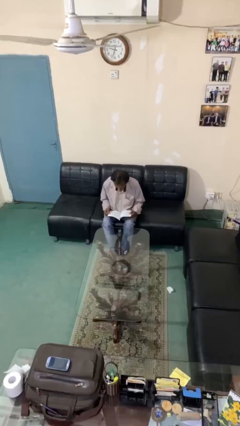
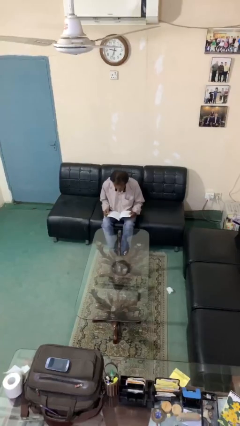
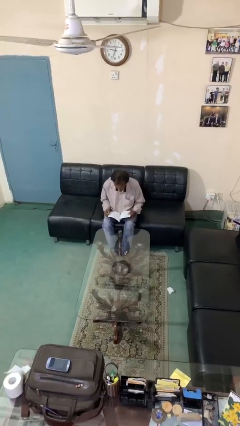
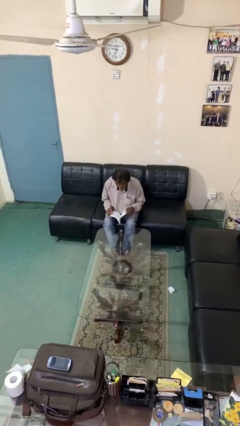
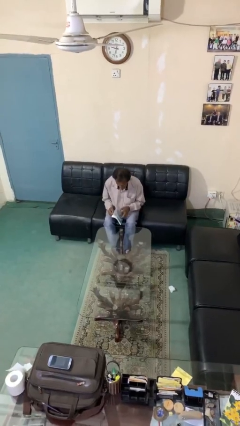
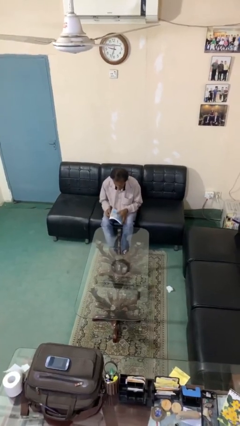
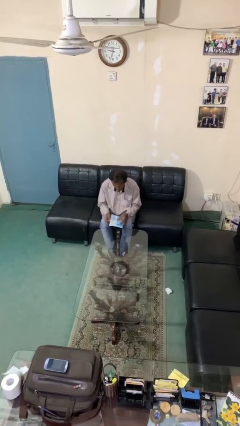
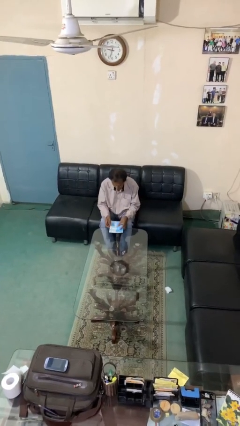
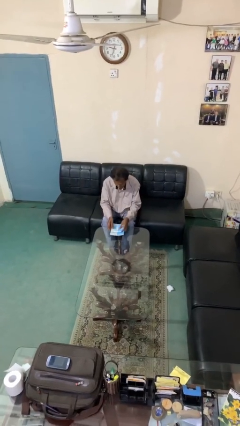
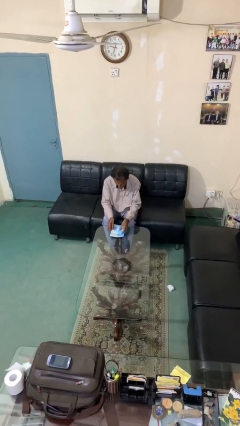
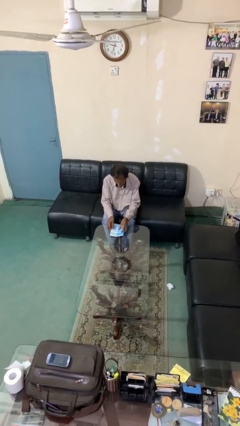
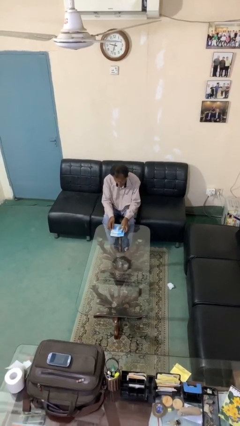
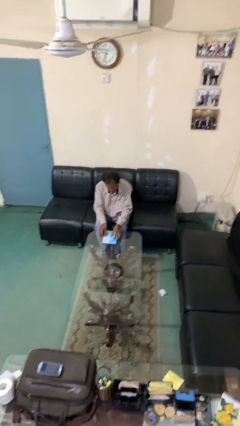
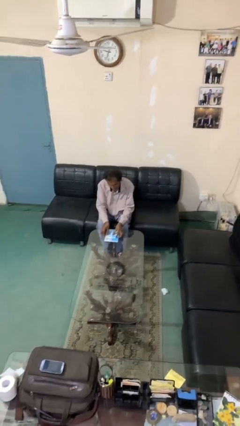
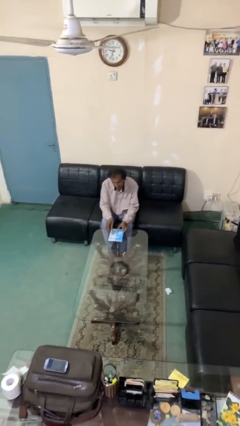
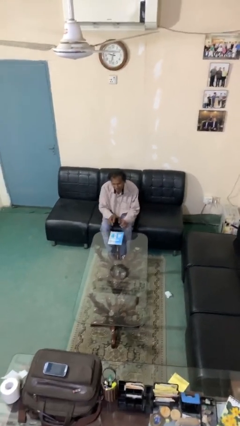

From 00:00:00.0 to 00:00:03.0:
person puts down object on table

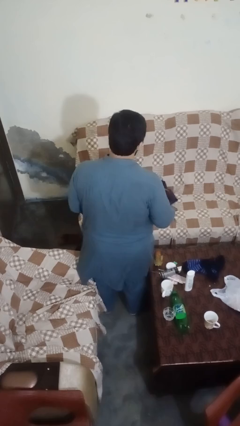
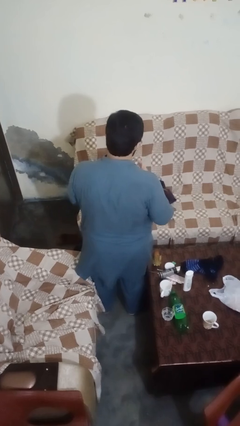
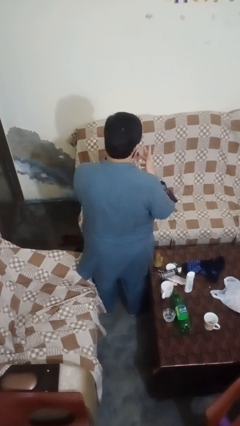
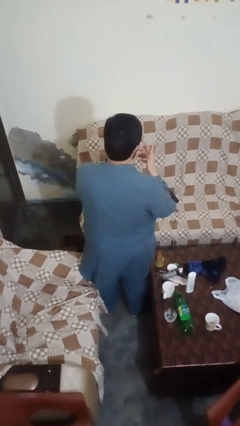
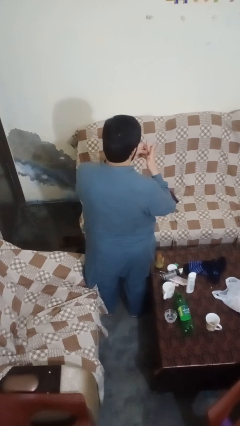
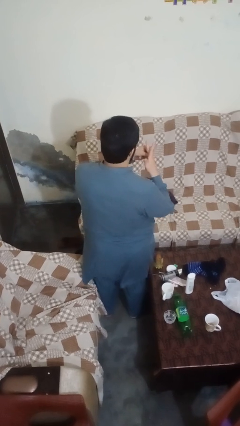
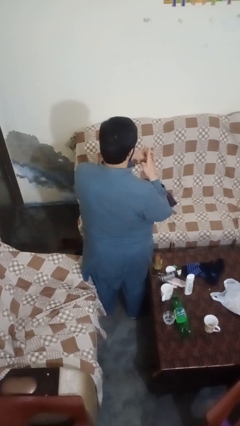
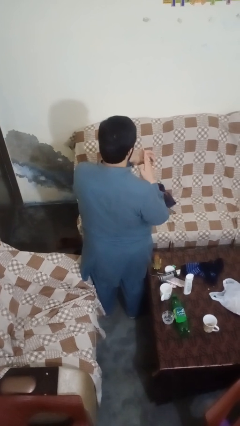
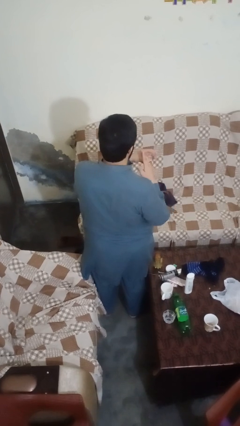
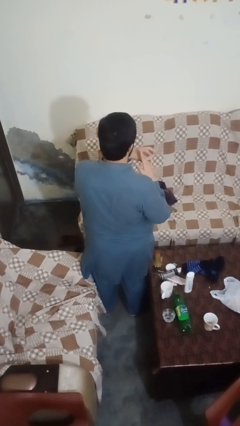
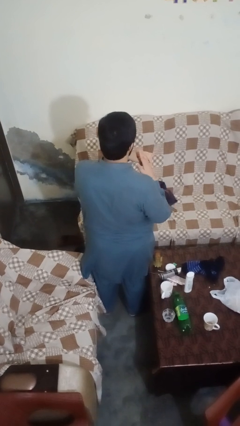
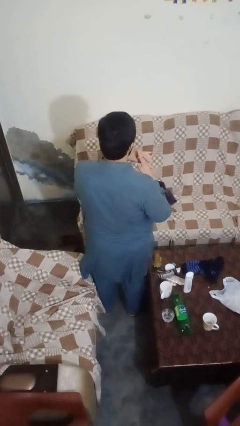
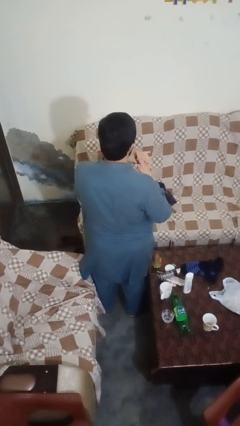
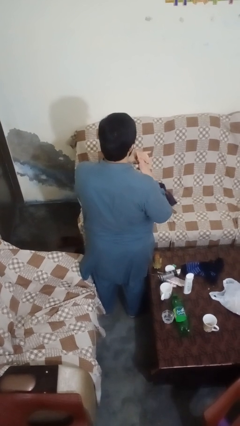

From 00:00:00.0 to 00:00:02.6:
person puts on ring

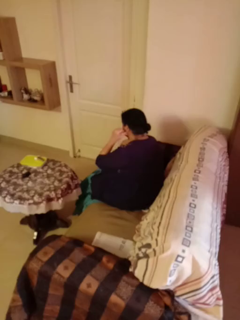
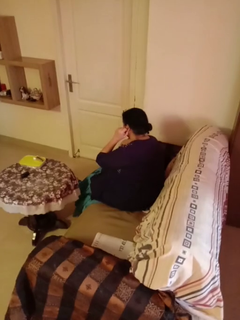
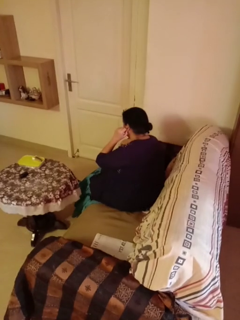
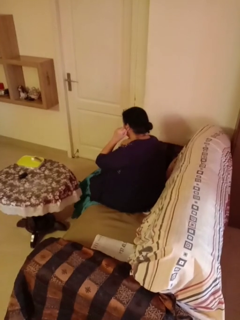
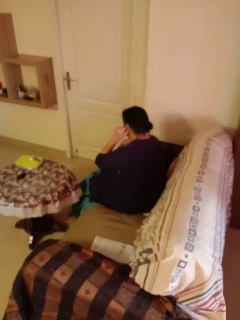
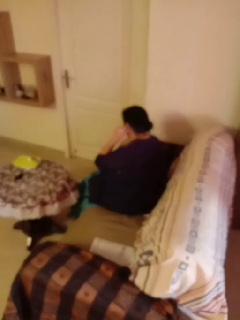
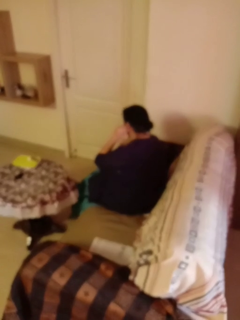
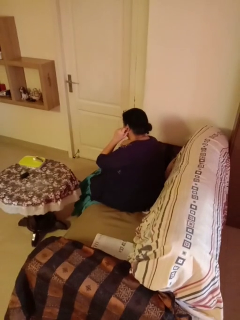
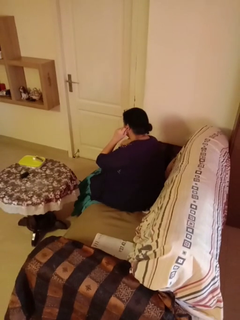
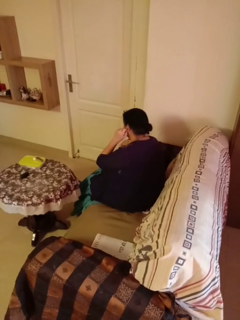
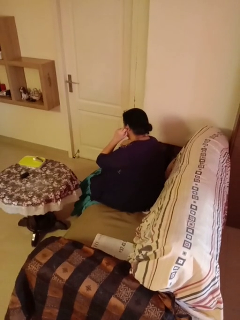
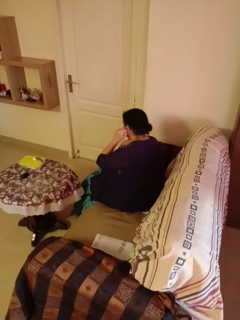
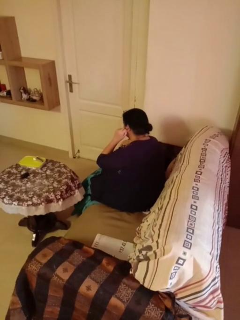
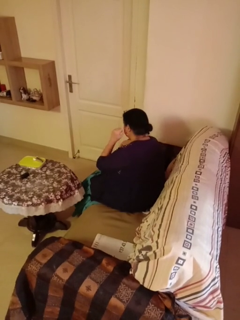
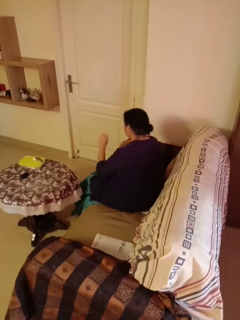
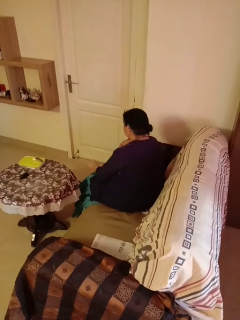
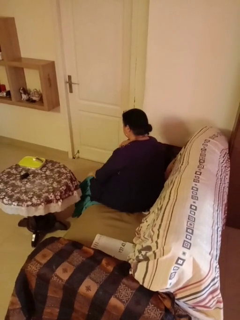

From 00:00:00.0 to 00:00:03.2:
person touches earlobe

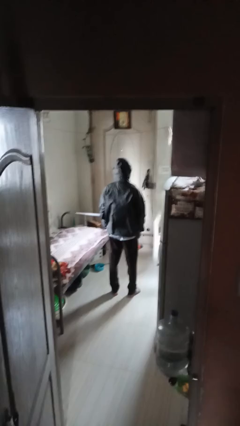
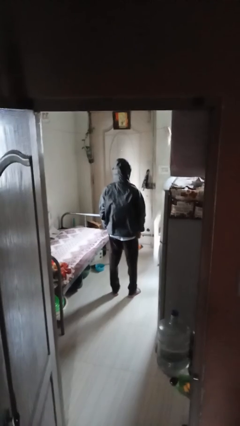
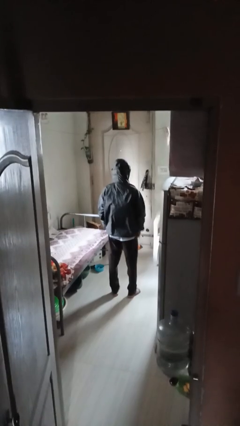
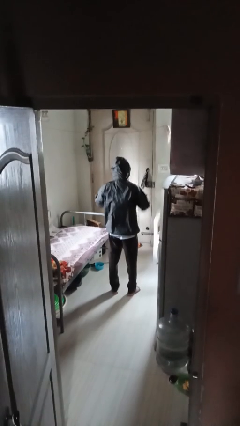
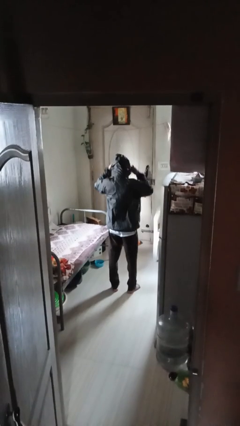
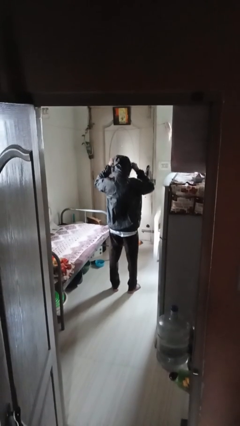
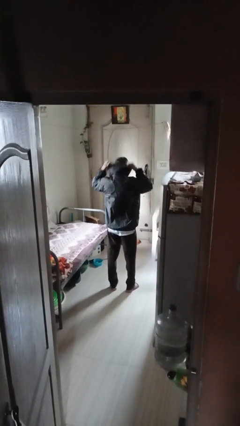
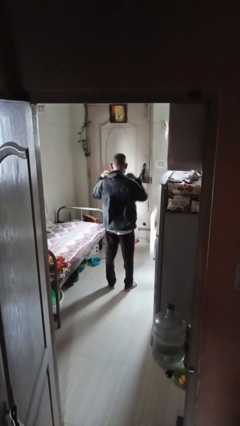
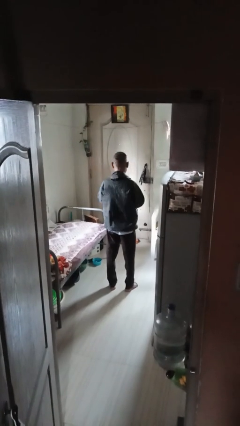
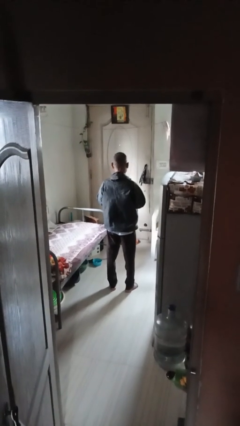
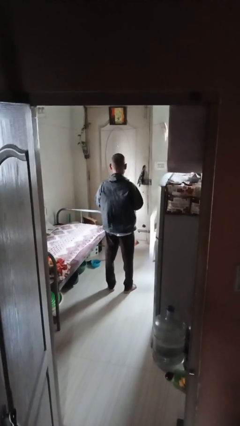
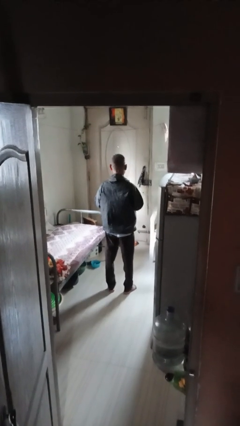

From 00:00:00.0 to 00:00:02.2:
person takes off hoodie

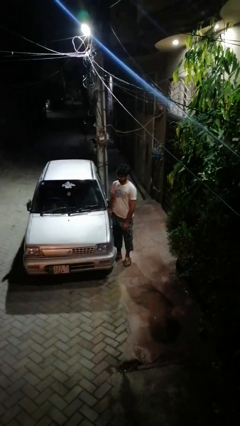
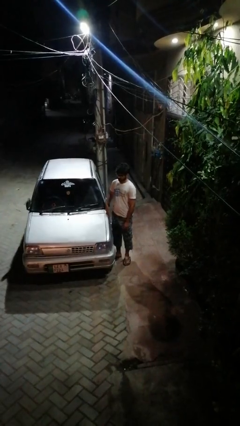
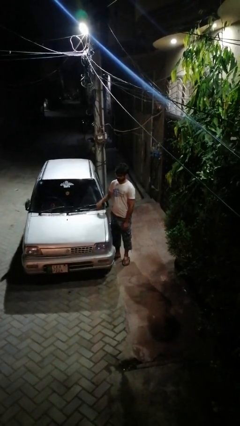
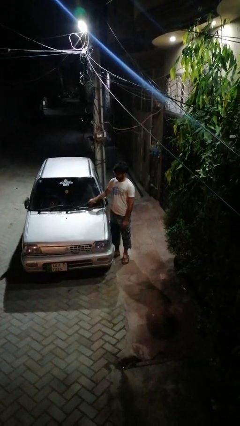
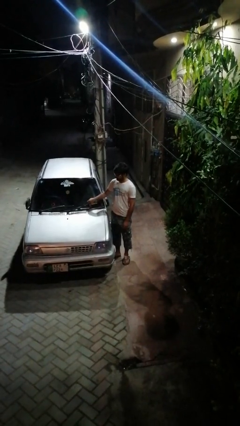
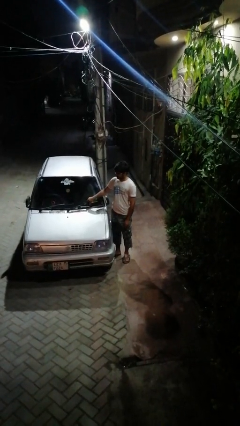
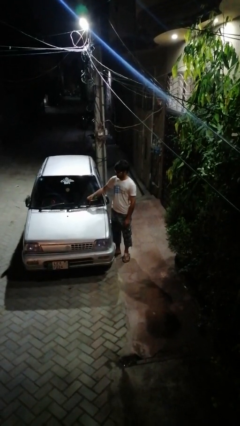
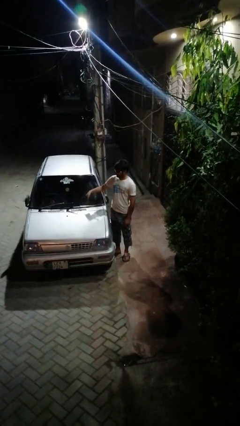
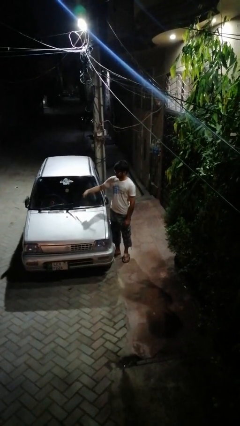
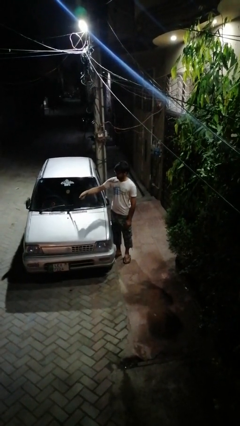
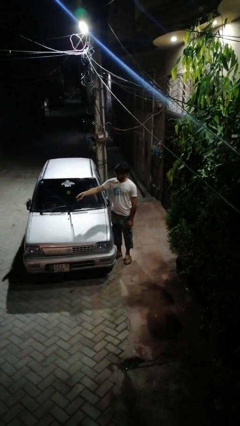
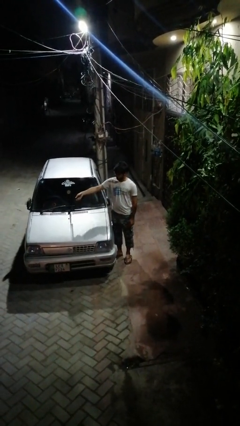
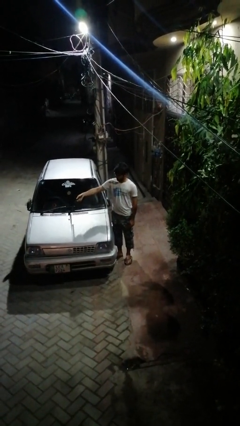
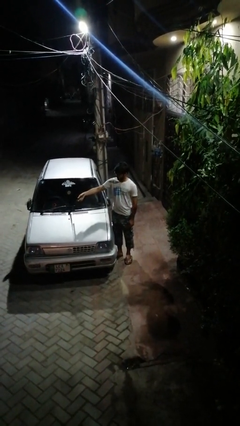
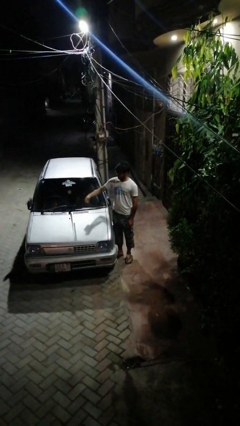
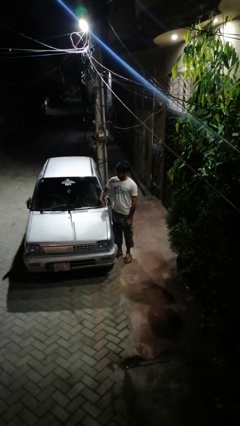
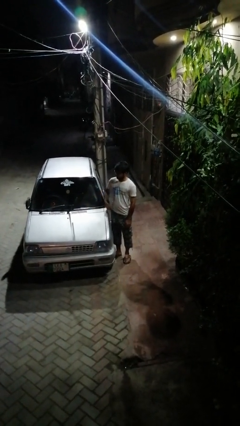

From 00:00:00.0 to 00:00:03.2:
person flips up car wipers

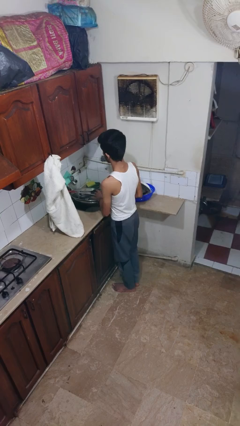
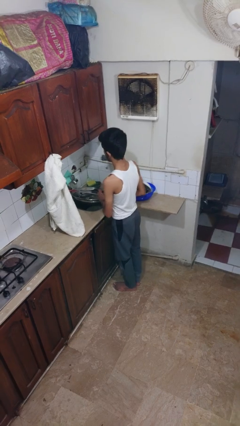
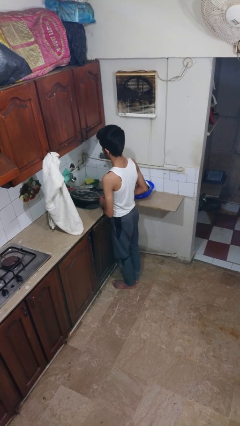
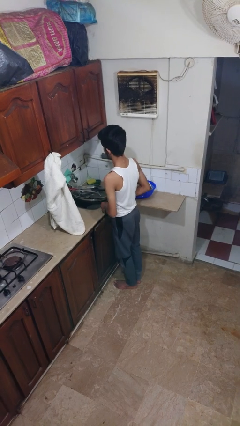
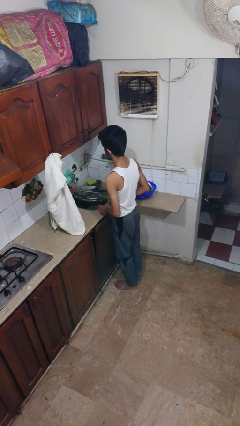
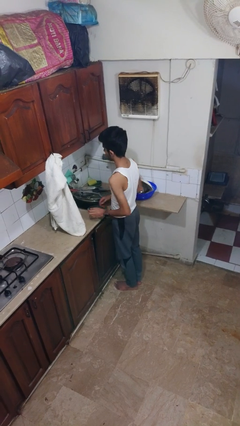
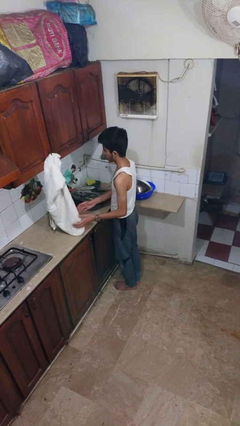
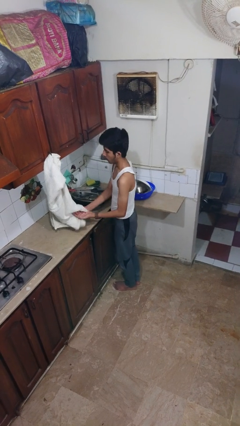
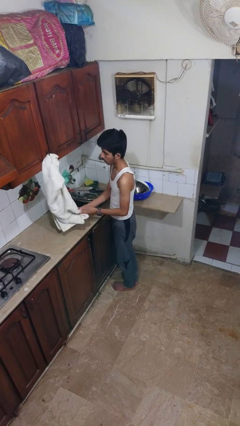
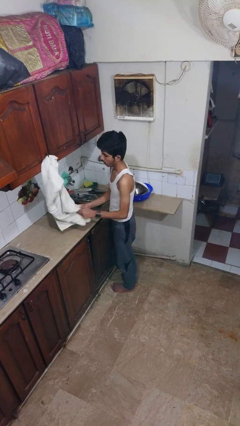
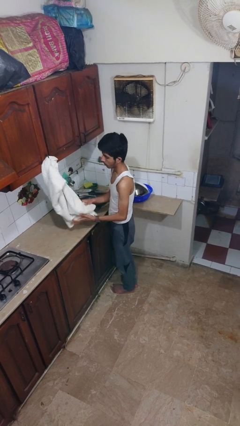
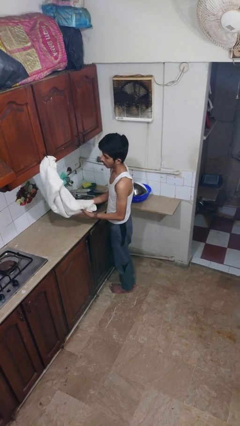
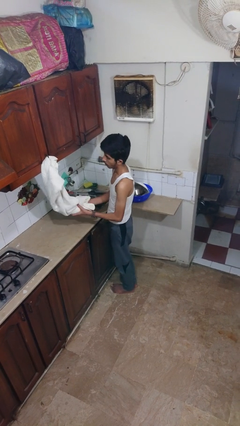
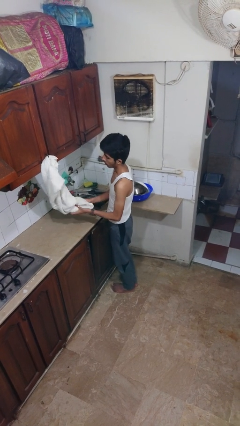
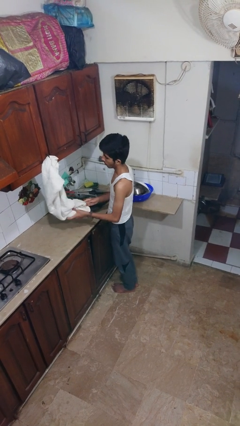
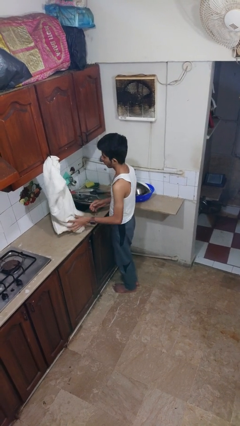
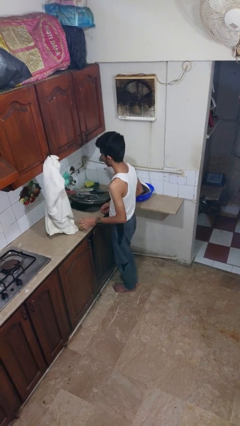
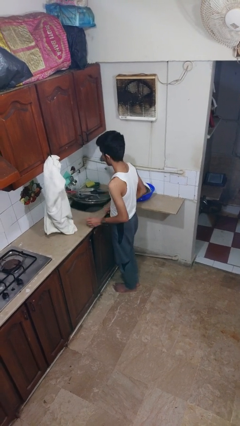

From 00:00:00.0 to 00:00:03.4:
person dries hands with towel

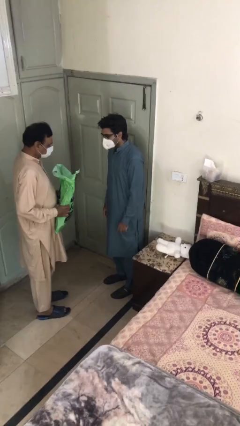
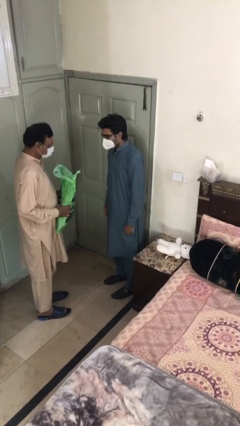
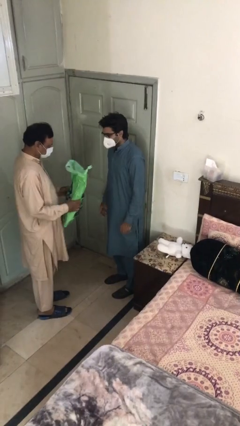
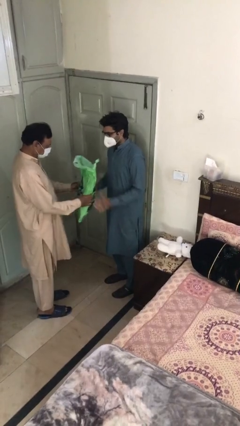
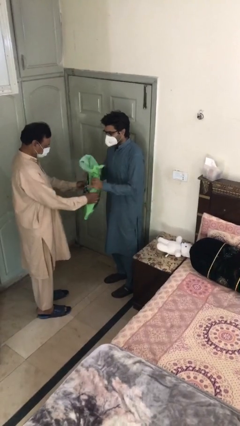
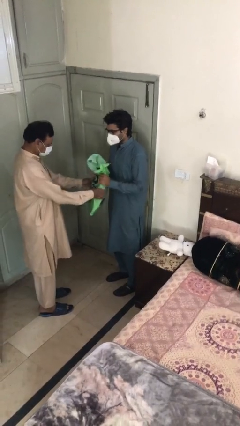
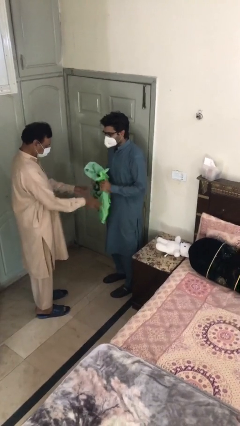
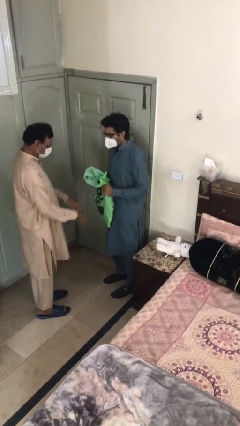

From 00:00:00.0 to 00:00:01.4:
person transfers object to person
